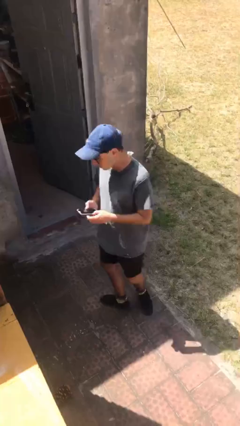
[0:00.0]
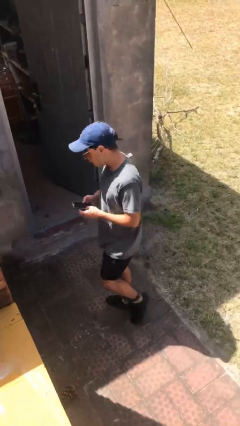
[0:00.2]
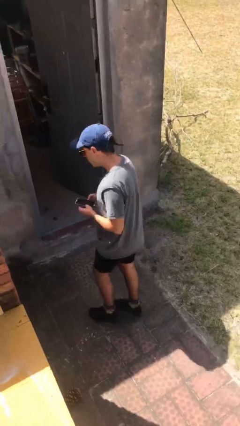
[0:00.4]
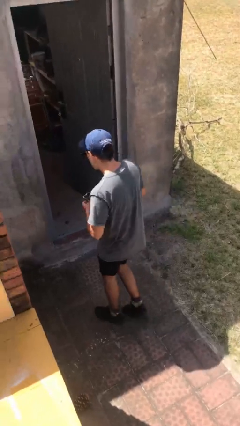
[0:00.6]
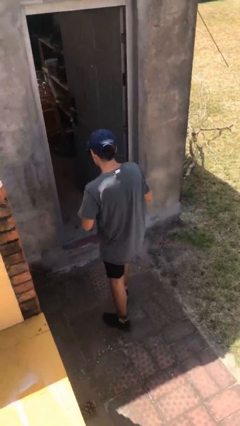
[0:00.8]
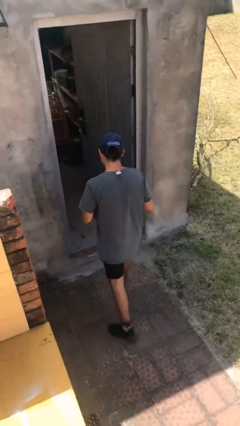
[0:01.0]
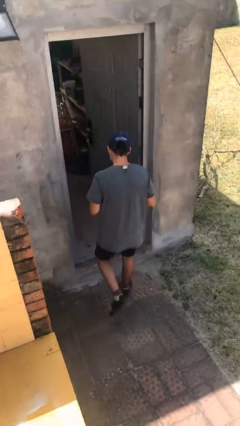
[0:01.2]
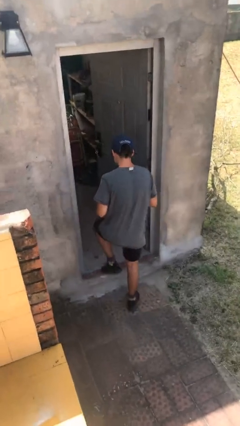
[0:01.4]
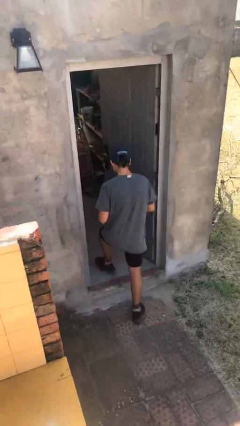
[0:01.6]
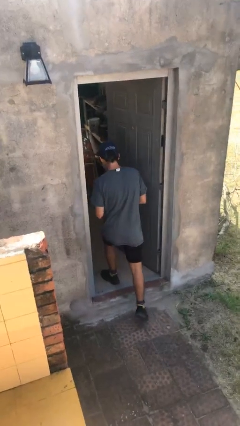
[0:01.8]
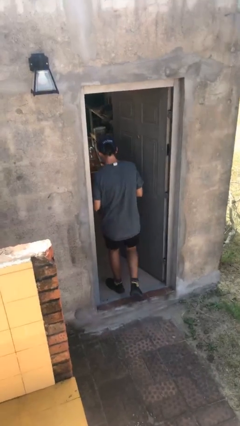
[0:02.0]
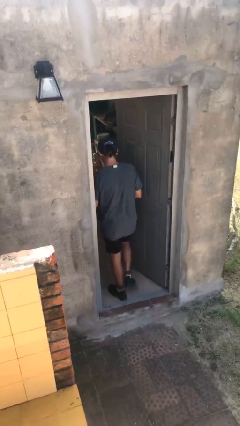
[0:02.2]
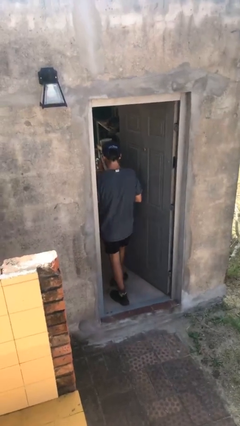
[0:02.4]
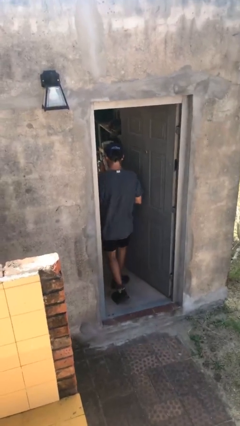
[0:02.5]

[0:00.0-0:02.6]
person exits scene through structure

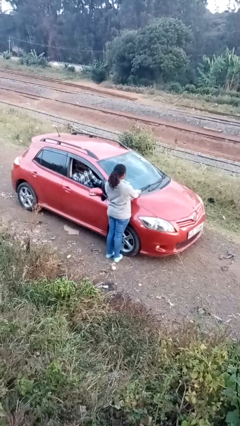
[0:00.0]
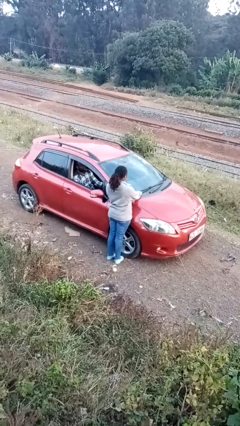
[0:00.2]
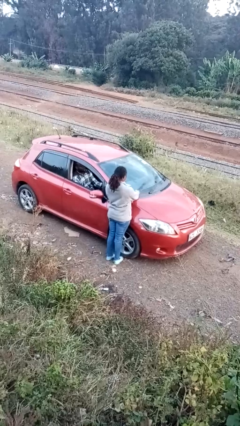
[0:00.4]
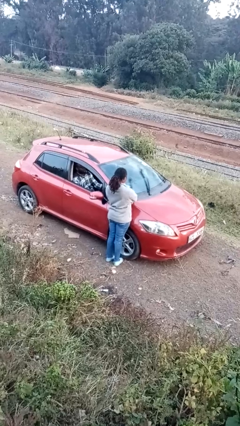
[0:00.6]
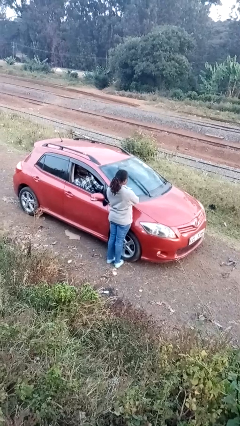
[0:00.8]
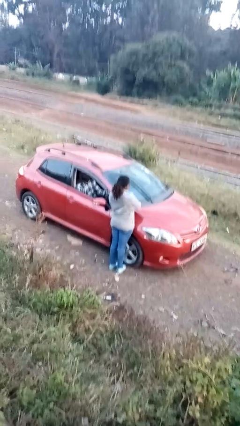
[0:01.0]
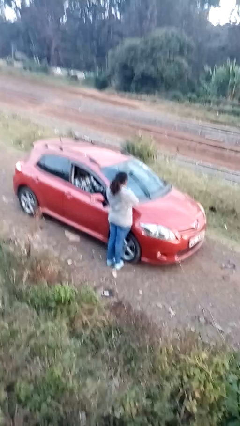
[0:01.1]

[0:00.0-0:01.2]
person flips up car wipers

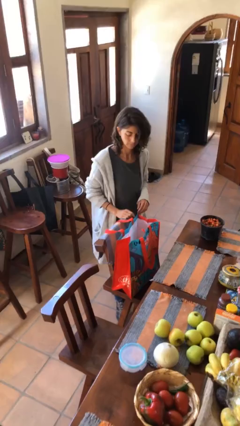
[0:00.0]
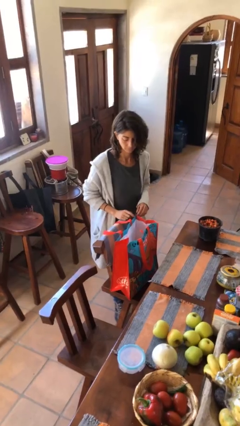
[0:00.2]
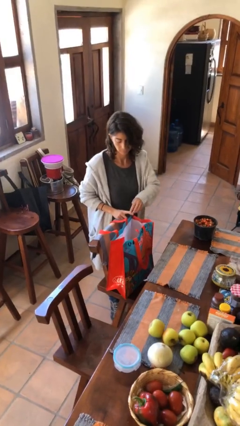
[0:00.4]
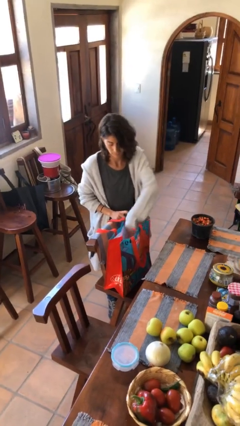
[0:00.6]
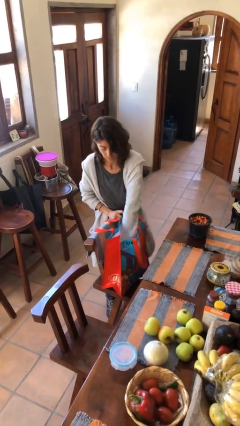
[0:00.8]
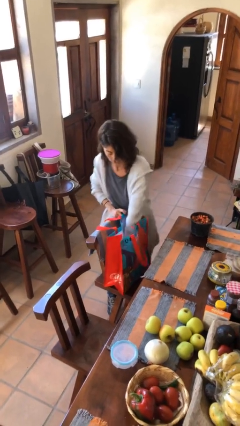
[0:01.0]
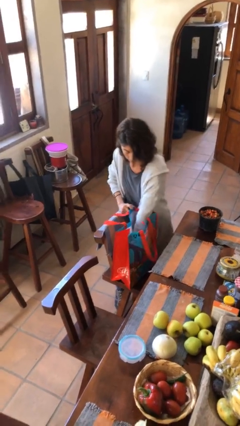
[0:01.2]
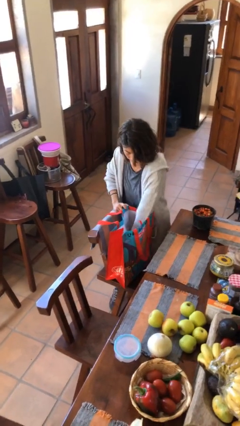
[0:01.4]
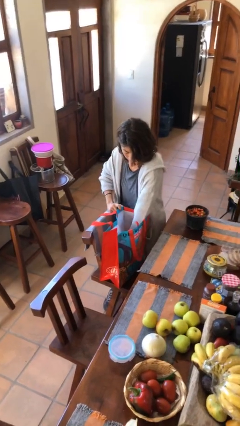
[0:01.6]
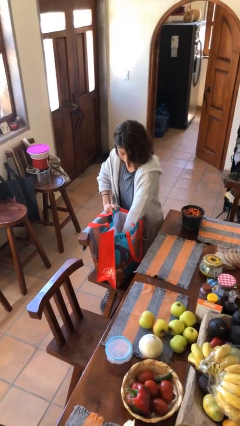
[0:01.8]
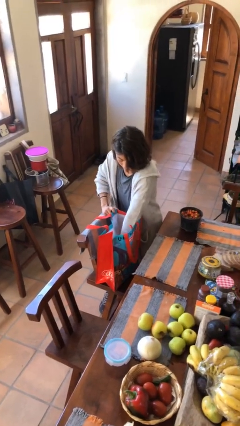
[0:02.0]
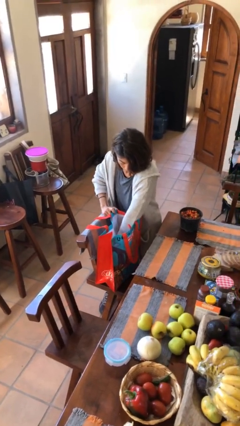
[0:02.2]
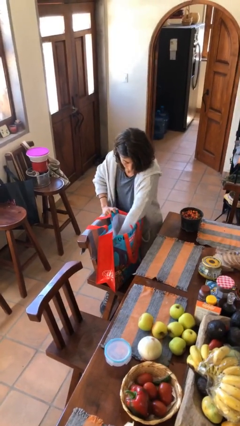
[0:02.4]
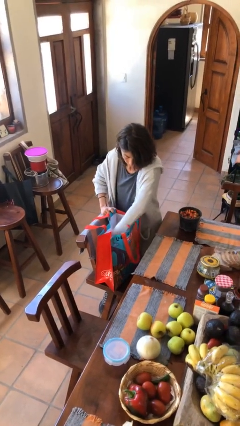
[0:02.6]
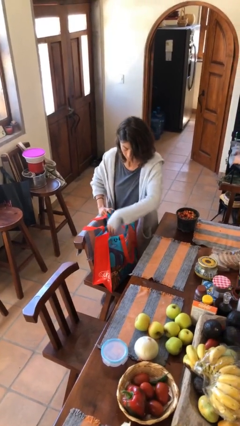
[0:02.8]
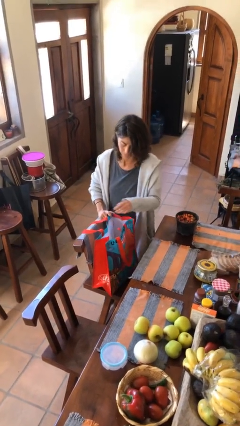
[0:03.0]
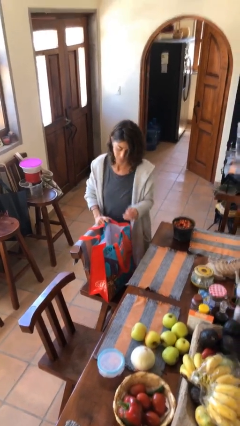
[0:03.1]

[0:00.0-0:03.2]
person searches in bag

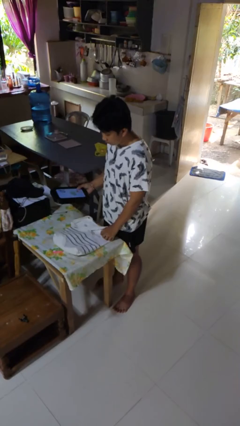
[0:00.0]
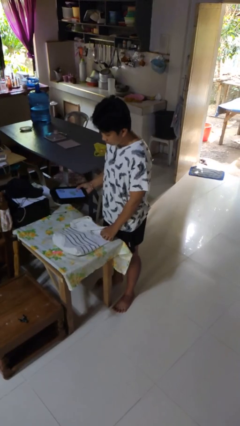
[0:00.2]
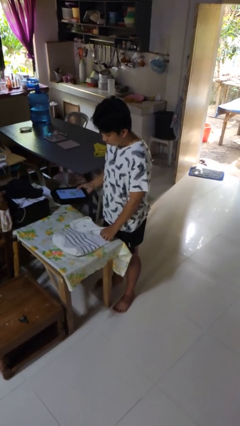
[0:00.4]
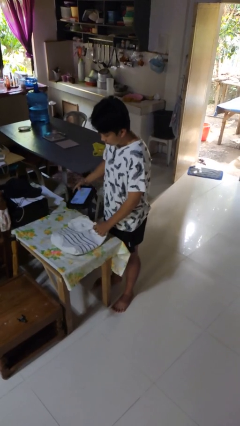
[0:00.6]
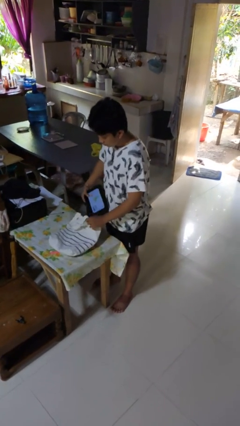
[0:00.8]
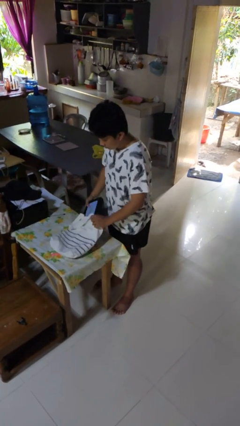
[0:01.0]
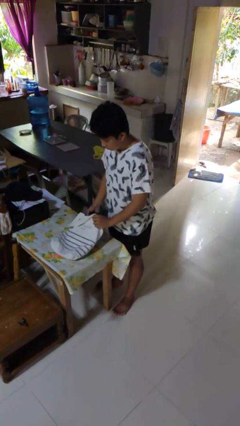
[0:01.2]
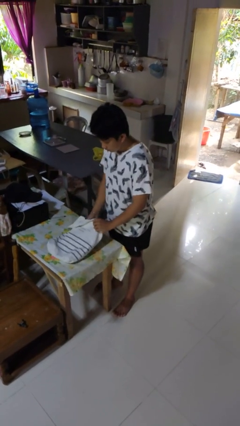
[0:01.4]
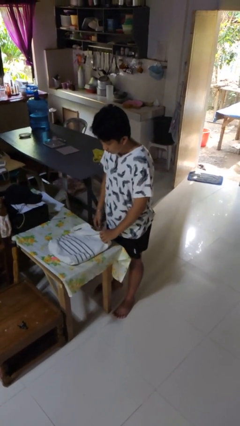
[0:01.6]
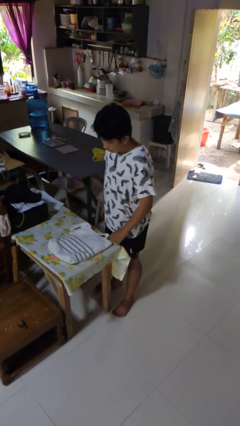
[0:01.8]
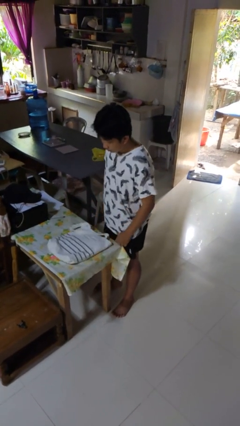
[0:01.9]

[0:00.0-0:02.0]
person puts object into bag

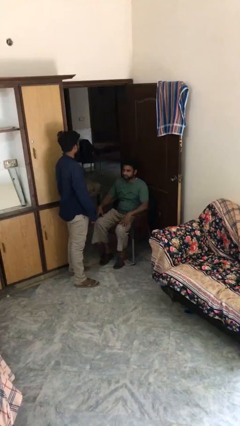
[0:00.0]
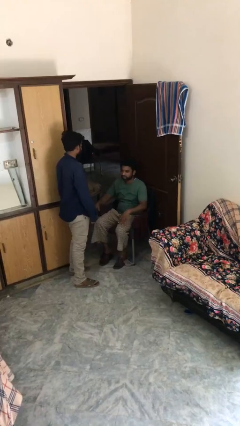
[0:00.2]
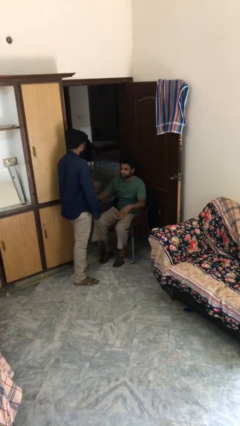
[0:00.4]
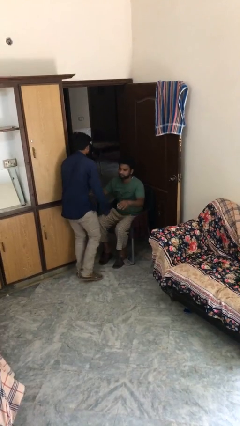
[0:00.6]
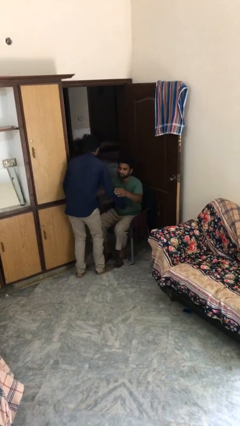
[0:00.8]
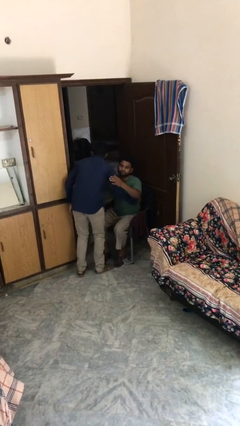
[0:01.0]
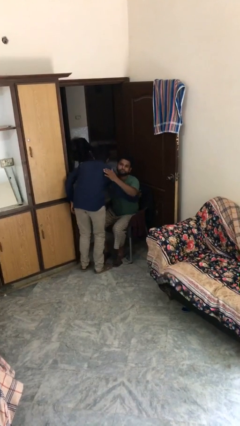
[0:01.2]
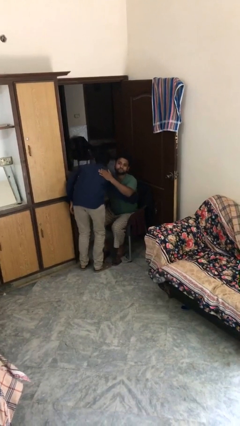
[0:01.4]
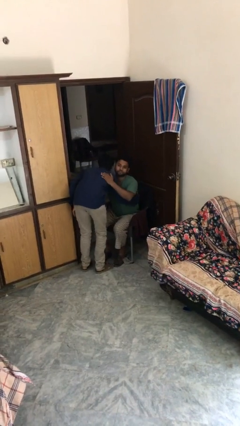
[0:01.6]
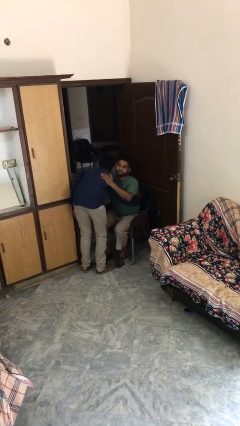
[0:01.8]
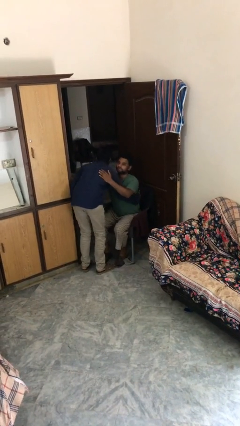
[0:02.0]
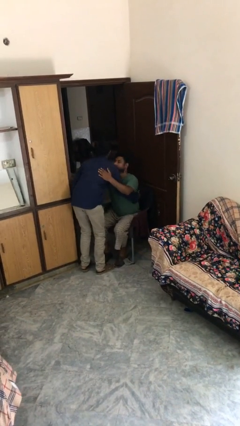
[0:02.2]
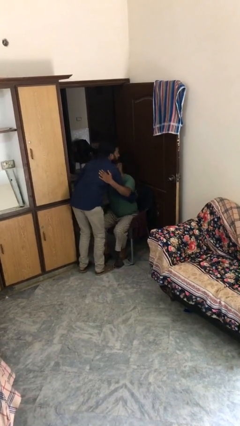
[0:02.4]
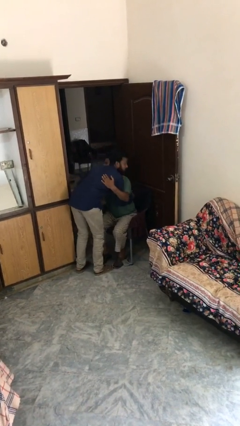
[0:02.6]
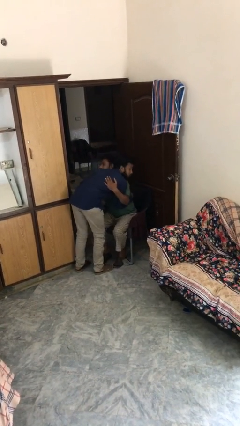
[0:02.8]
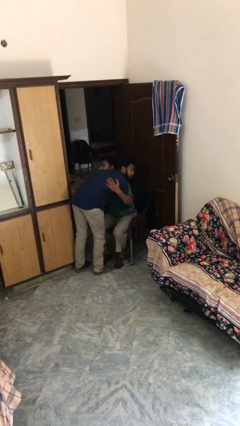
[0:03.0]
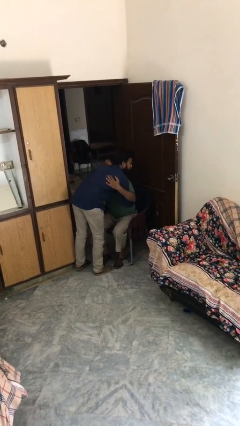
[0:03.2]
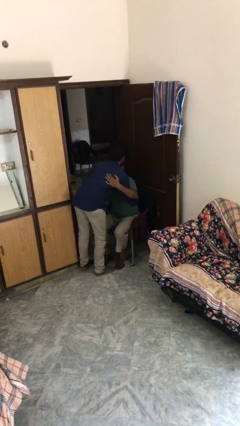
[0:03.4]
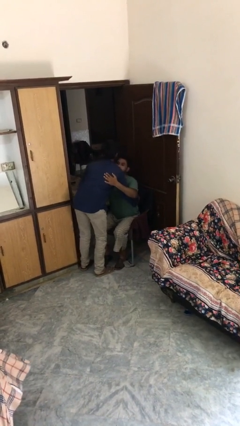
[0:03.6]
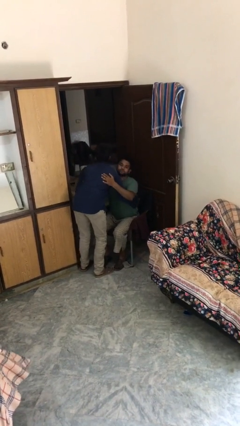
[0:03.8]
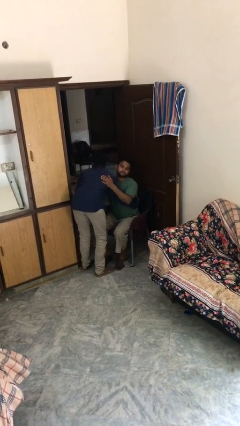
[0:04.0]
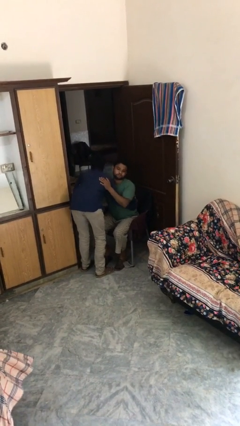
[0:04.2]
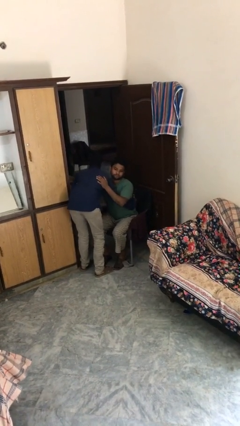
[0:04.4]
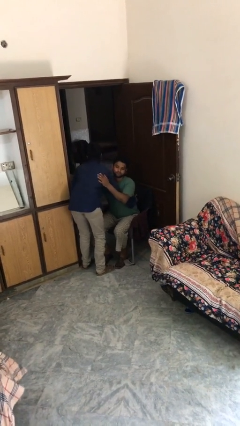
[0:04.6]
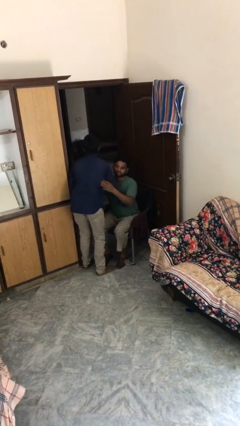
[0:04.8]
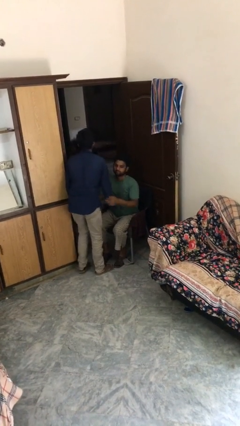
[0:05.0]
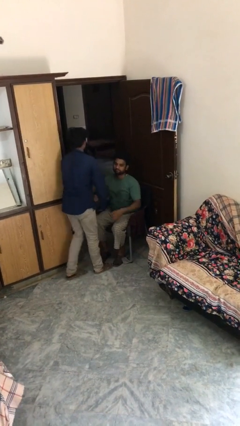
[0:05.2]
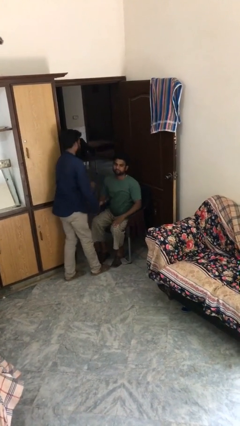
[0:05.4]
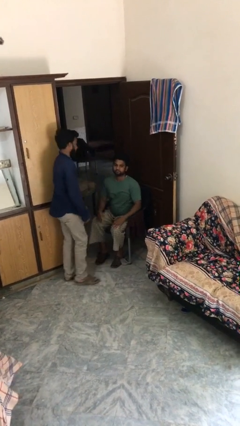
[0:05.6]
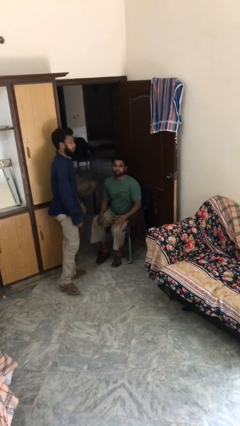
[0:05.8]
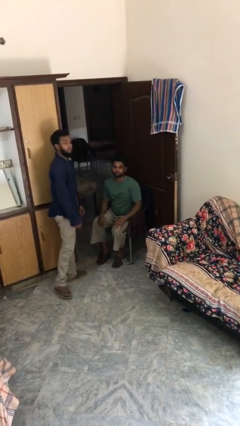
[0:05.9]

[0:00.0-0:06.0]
person embraces person

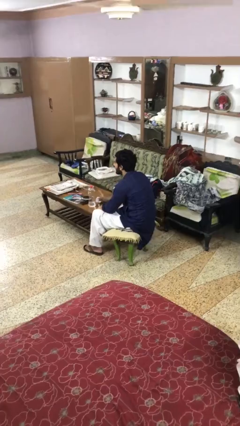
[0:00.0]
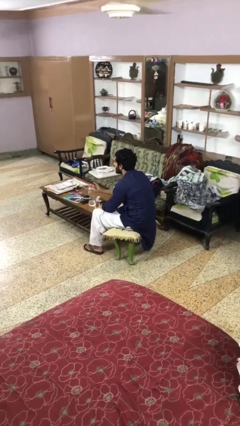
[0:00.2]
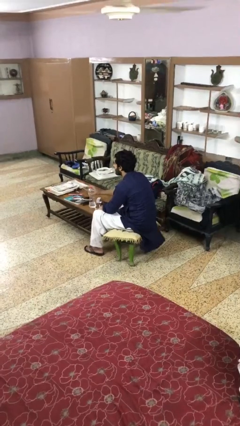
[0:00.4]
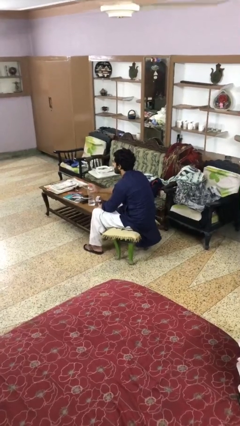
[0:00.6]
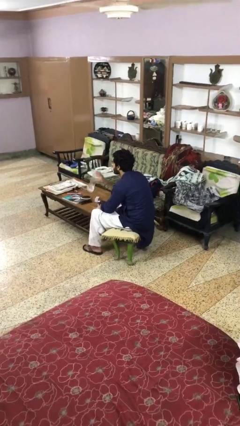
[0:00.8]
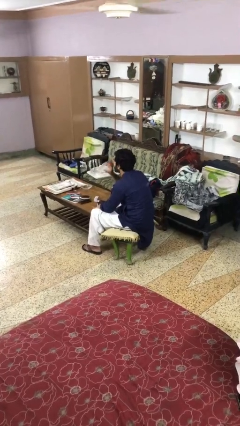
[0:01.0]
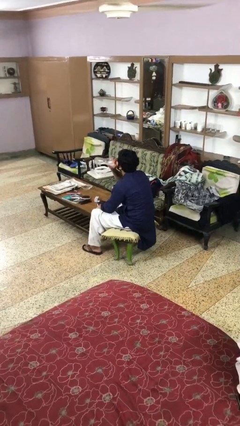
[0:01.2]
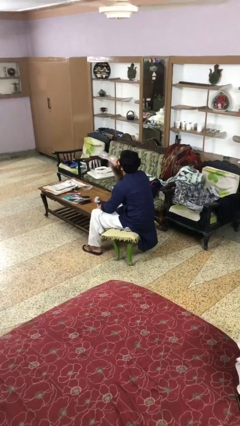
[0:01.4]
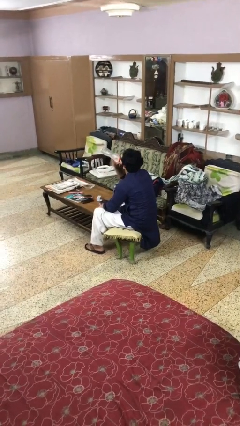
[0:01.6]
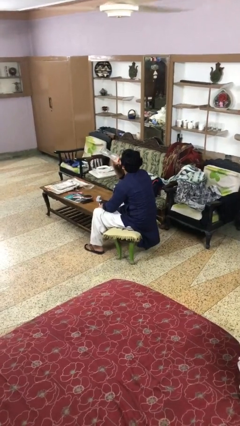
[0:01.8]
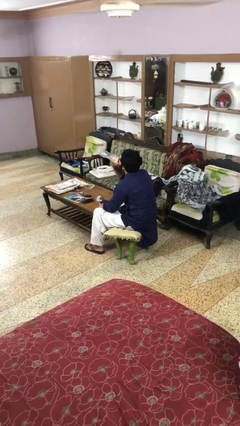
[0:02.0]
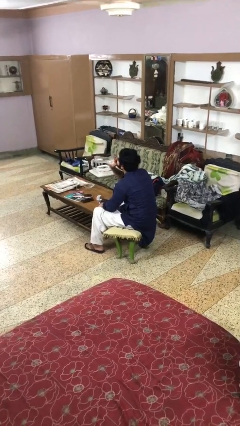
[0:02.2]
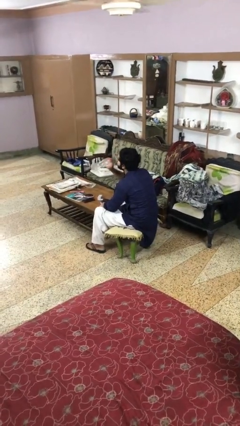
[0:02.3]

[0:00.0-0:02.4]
person drinks from cup
